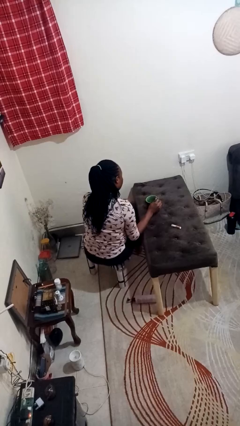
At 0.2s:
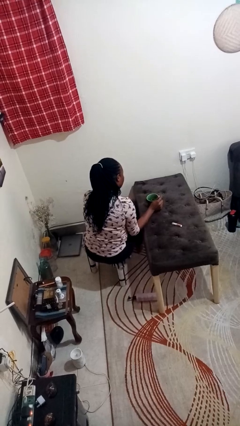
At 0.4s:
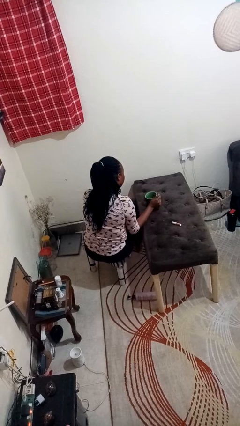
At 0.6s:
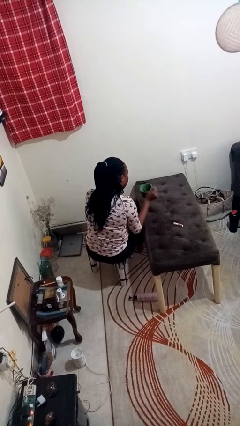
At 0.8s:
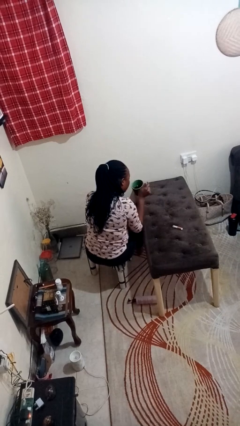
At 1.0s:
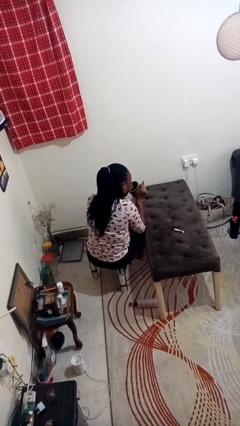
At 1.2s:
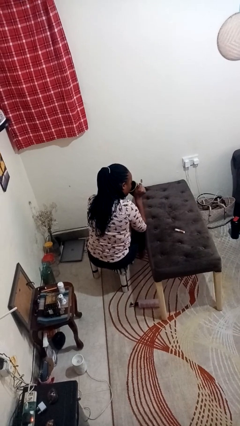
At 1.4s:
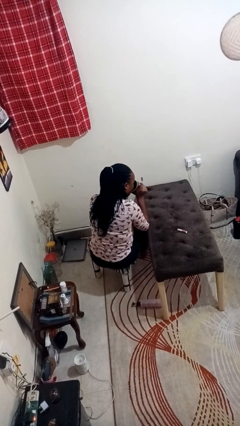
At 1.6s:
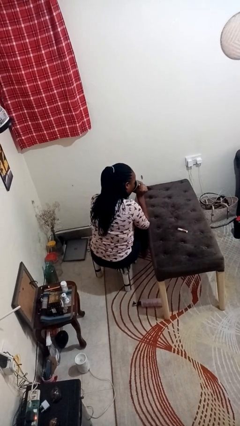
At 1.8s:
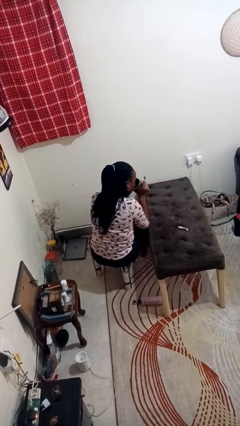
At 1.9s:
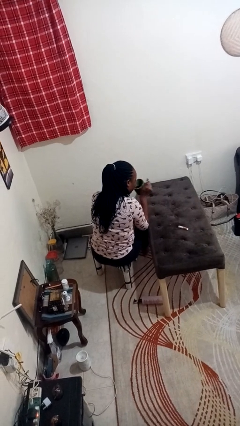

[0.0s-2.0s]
person drinks from mug

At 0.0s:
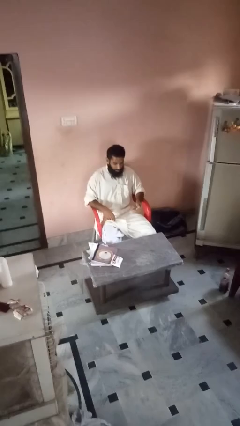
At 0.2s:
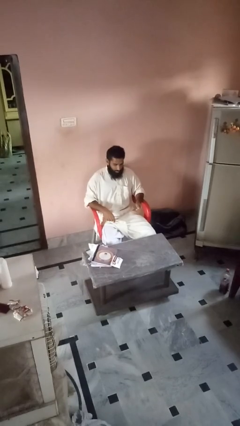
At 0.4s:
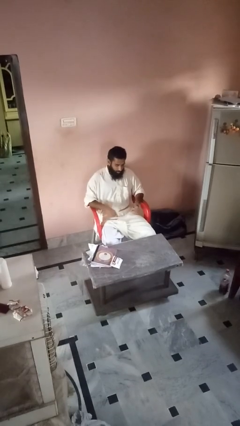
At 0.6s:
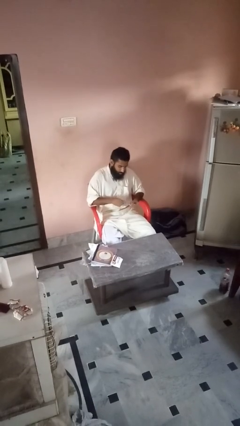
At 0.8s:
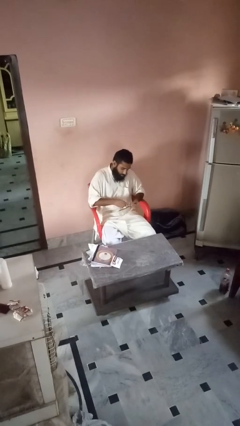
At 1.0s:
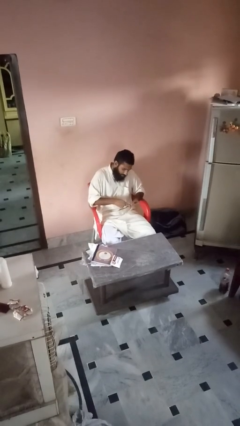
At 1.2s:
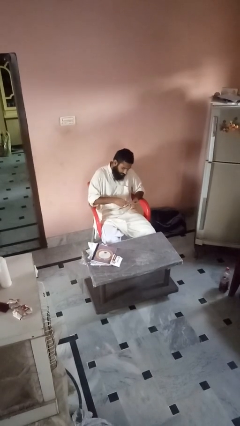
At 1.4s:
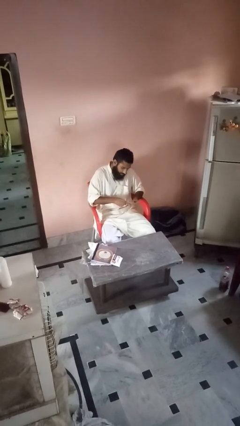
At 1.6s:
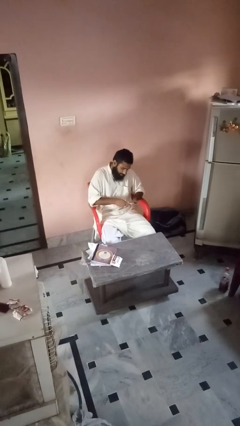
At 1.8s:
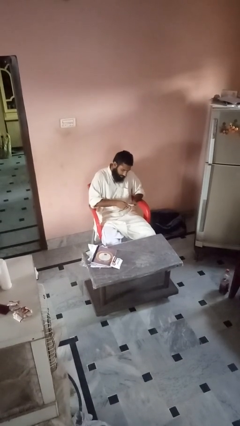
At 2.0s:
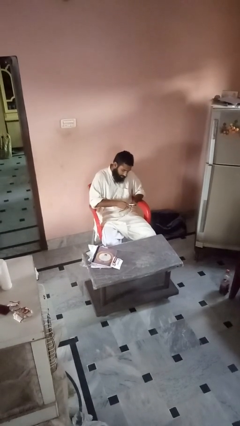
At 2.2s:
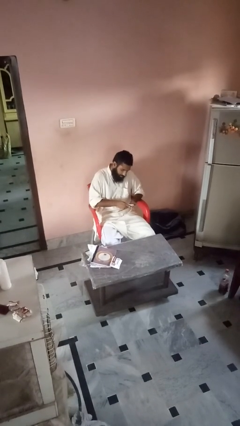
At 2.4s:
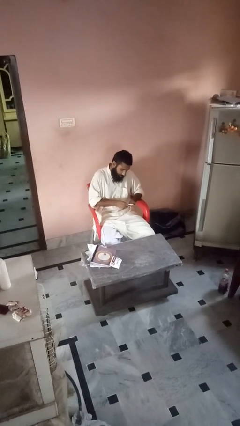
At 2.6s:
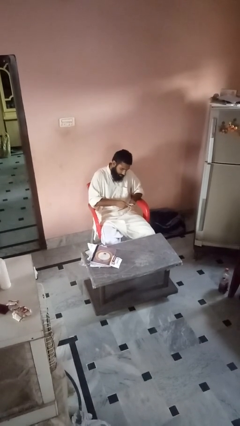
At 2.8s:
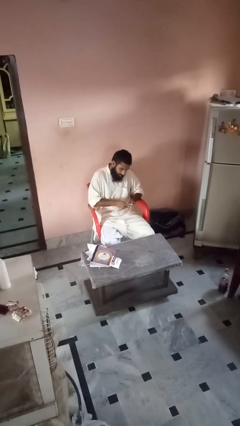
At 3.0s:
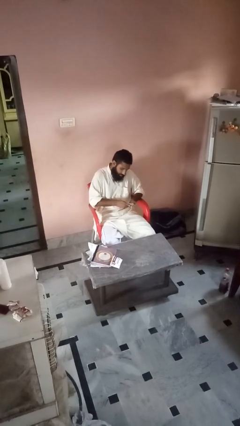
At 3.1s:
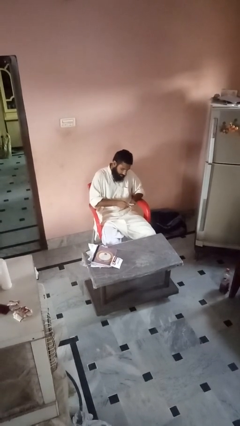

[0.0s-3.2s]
person files fingernails

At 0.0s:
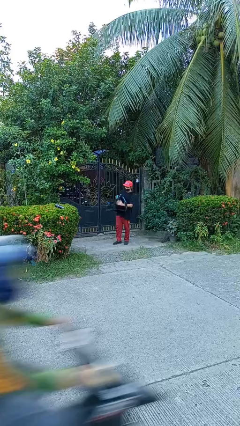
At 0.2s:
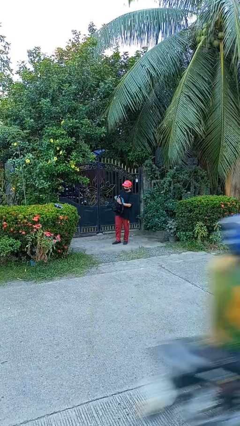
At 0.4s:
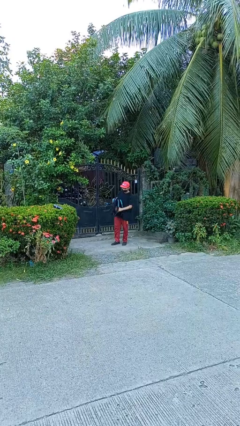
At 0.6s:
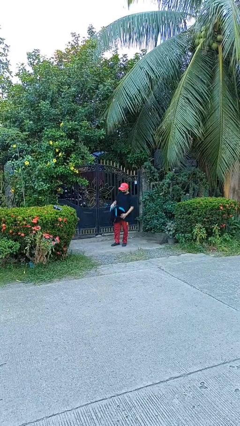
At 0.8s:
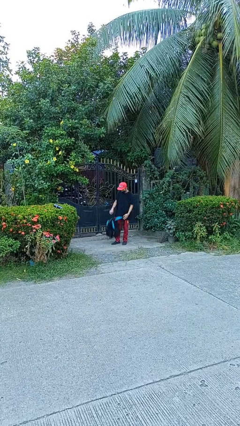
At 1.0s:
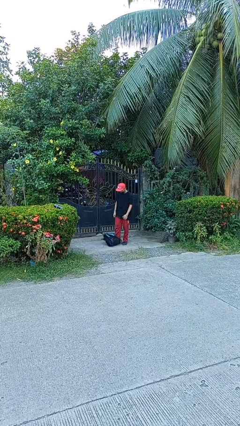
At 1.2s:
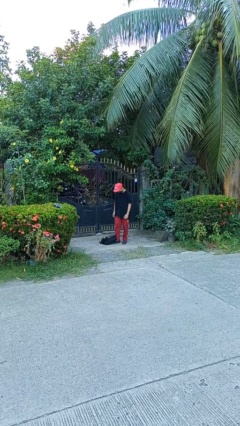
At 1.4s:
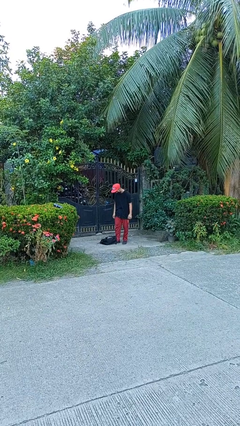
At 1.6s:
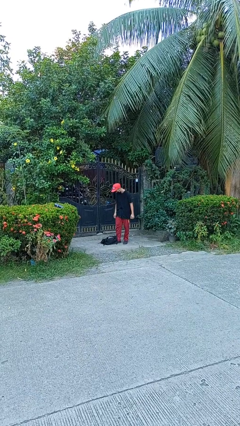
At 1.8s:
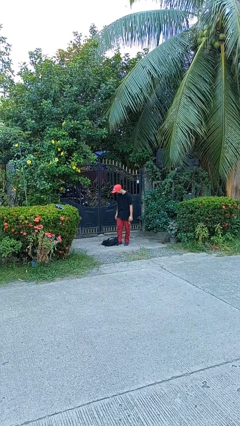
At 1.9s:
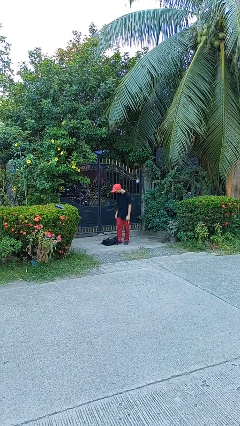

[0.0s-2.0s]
person drops object

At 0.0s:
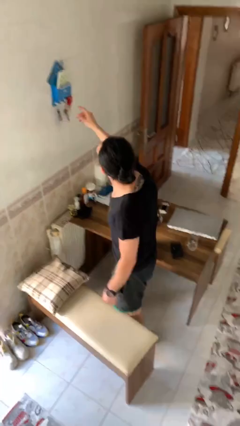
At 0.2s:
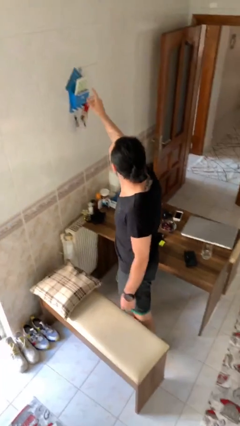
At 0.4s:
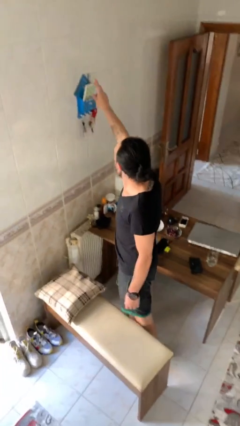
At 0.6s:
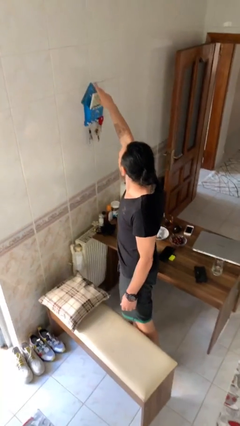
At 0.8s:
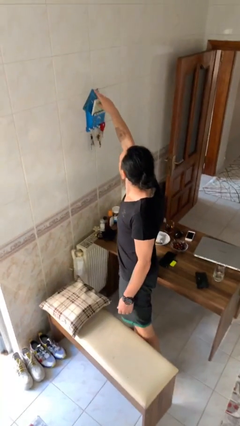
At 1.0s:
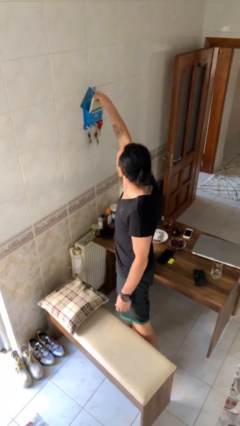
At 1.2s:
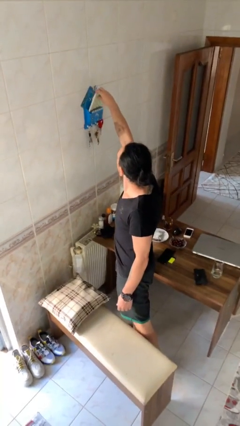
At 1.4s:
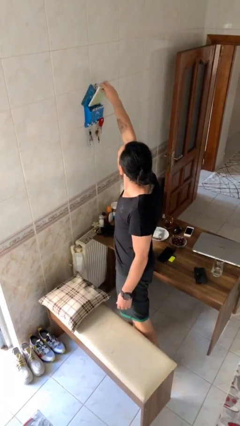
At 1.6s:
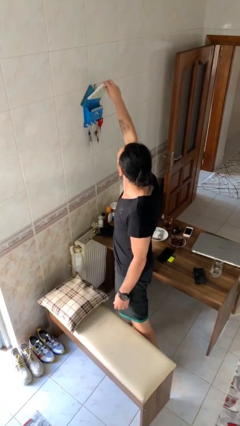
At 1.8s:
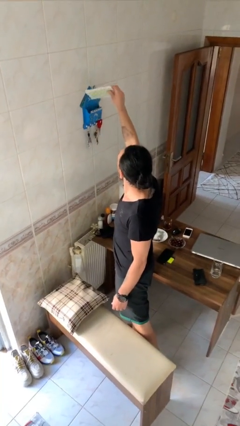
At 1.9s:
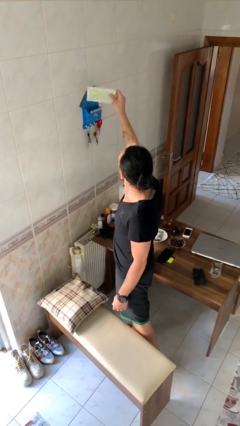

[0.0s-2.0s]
person picks up object from shelf

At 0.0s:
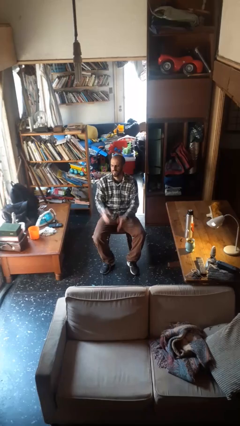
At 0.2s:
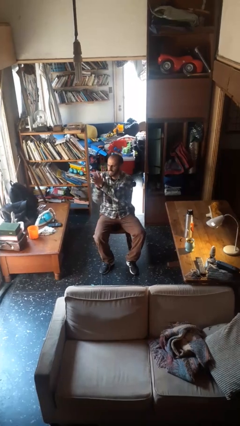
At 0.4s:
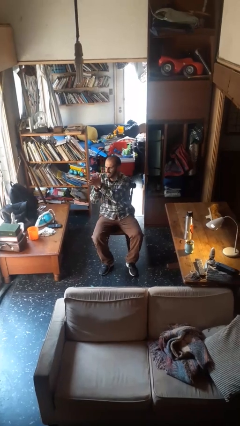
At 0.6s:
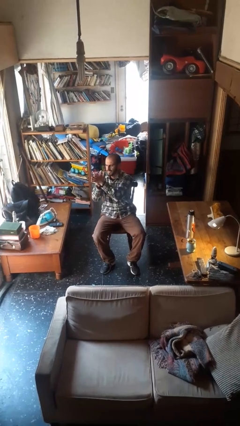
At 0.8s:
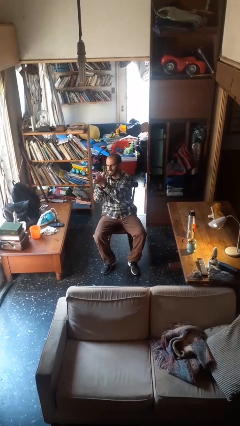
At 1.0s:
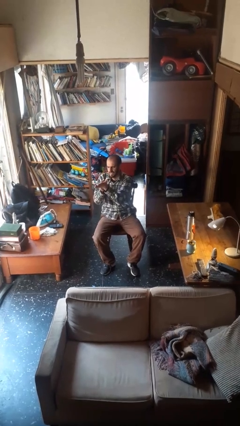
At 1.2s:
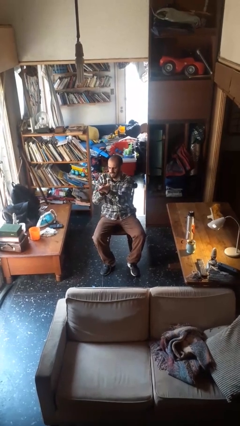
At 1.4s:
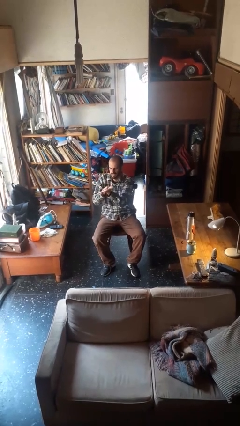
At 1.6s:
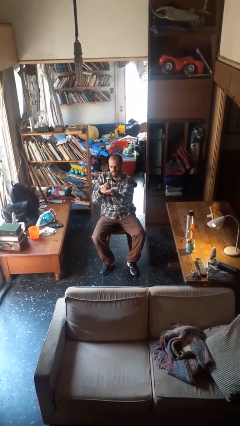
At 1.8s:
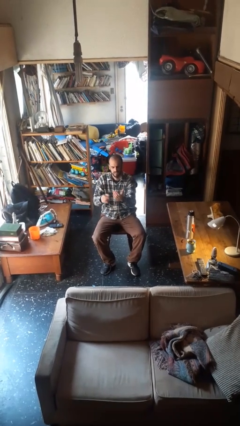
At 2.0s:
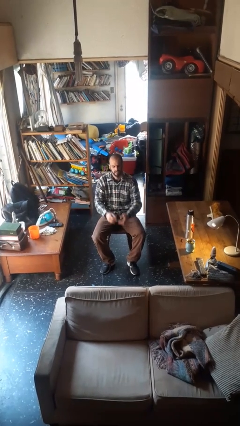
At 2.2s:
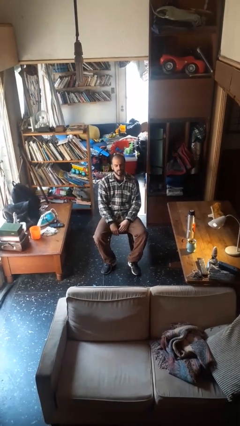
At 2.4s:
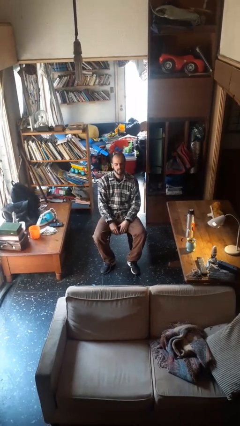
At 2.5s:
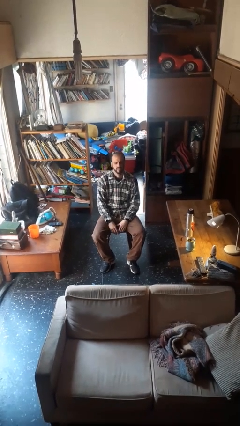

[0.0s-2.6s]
person swats bug

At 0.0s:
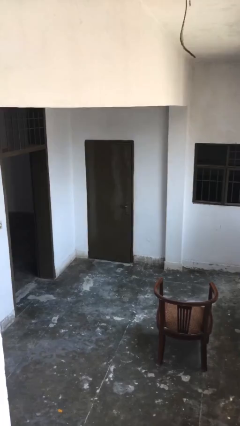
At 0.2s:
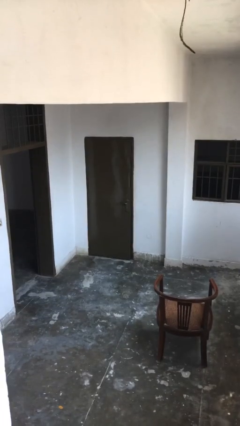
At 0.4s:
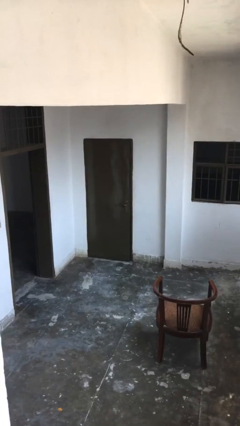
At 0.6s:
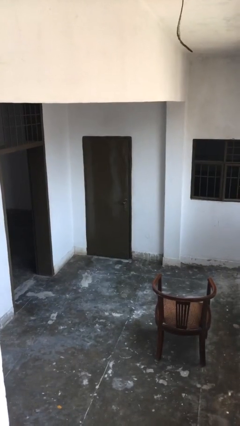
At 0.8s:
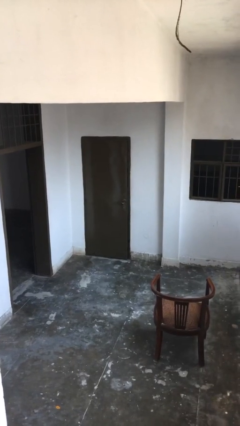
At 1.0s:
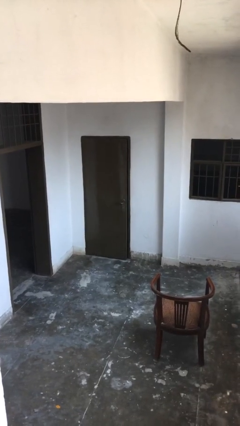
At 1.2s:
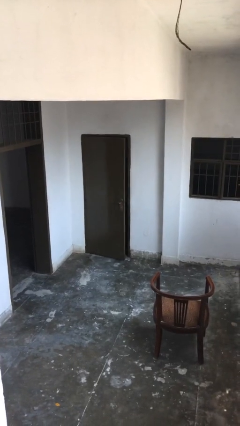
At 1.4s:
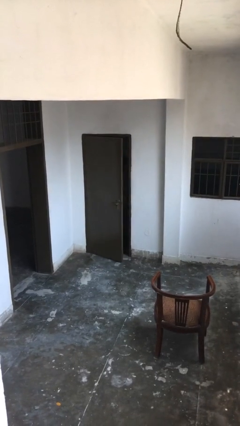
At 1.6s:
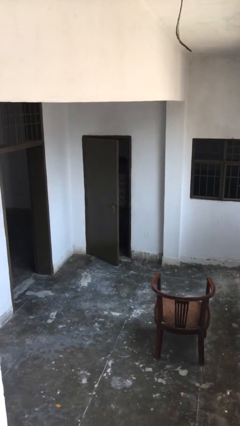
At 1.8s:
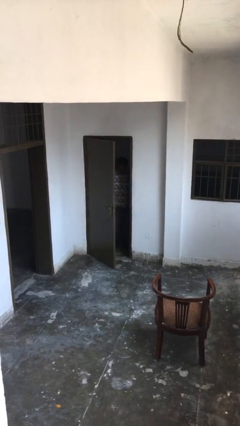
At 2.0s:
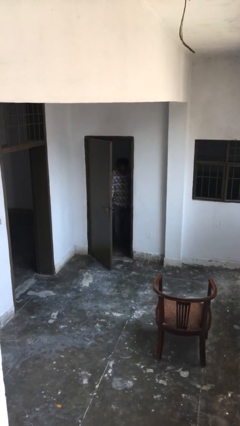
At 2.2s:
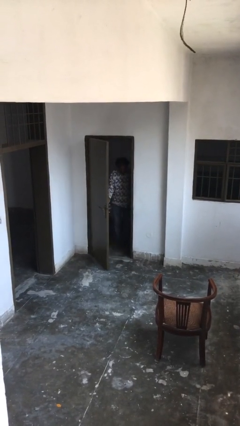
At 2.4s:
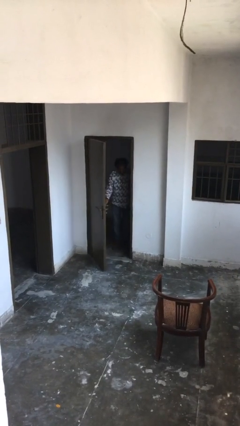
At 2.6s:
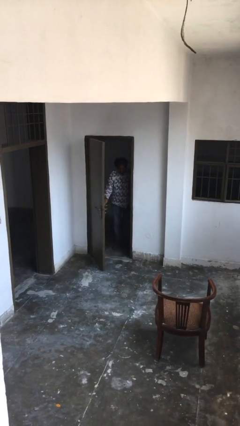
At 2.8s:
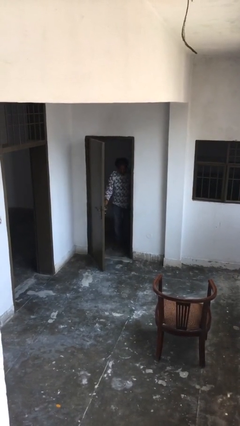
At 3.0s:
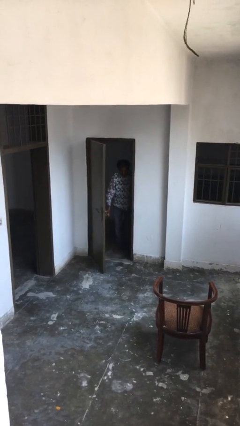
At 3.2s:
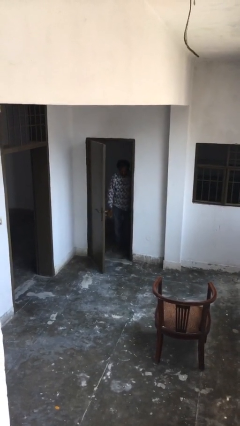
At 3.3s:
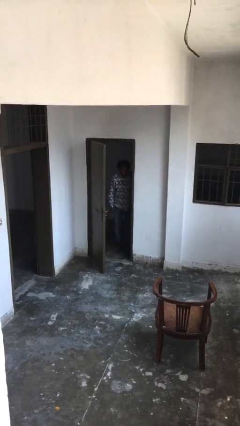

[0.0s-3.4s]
person opens facility door

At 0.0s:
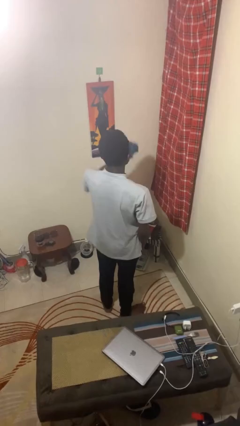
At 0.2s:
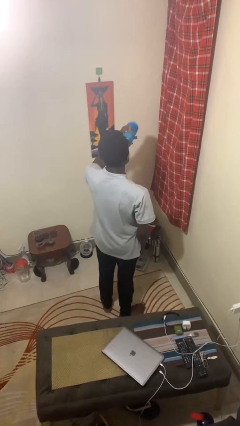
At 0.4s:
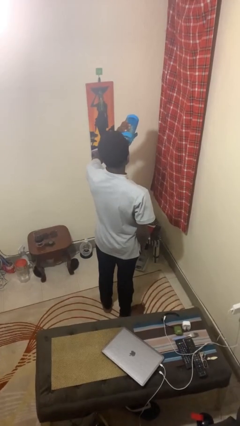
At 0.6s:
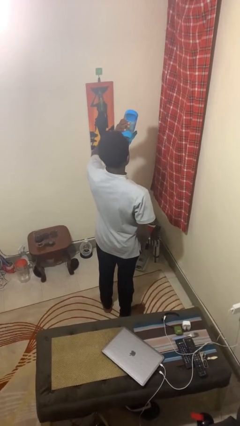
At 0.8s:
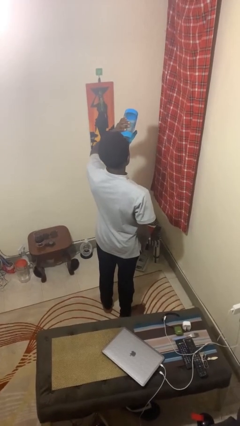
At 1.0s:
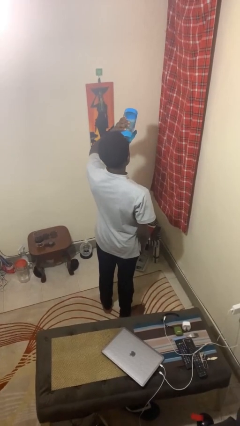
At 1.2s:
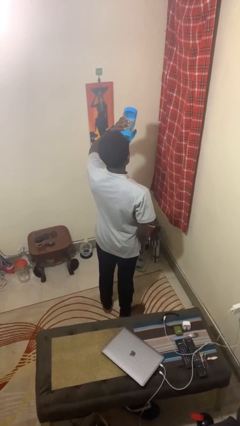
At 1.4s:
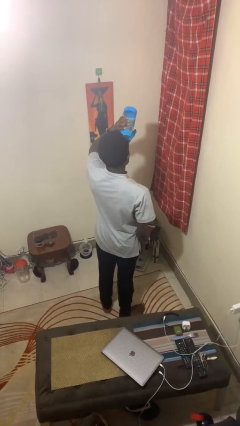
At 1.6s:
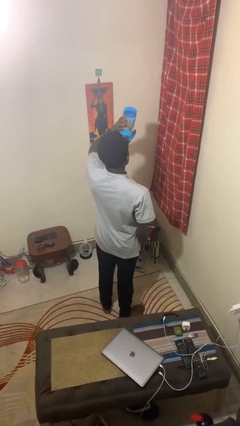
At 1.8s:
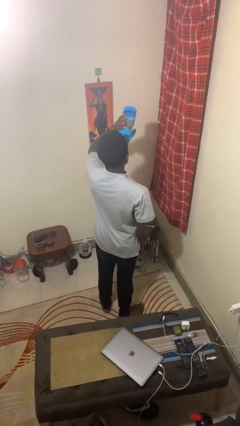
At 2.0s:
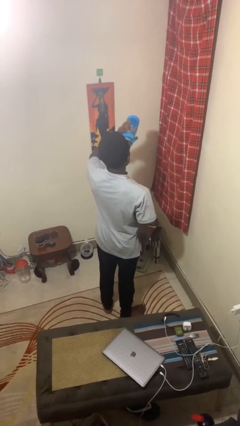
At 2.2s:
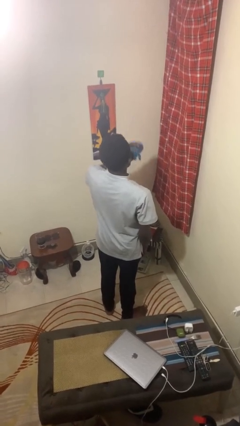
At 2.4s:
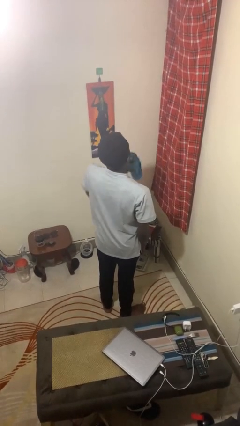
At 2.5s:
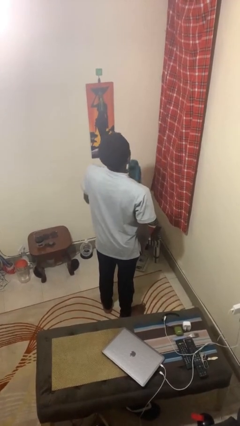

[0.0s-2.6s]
person drinks from bottle
